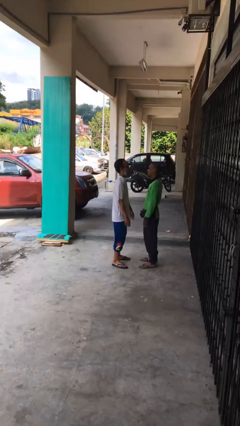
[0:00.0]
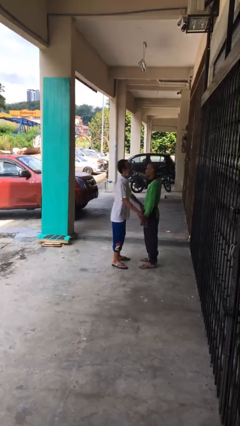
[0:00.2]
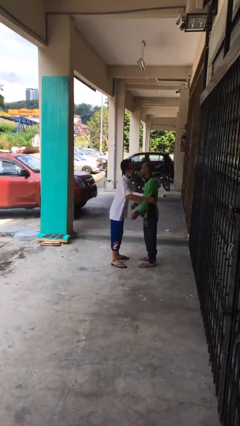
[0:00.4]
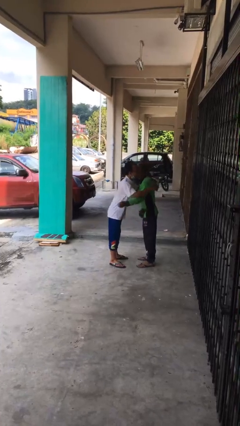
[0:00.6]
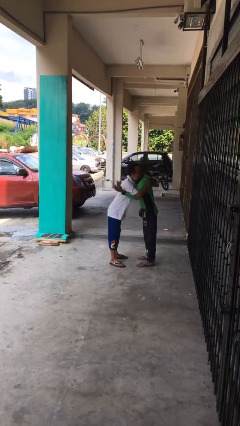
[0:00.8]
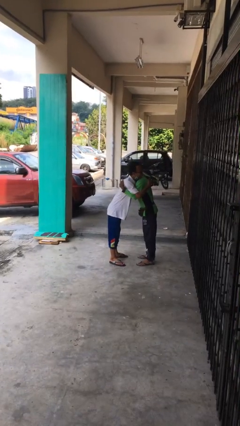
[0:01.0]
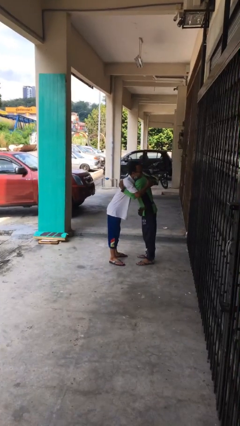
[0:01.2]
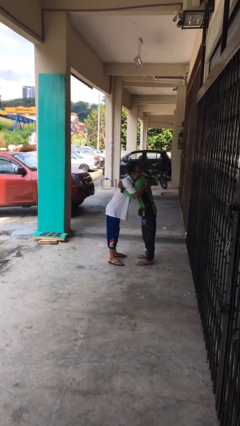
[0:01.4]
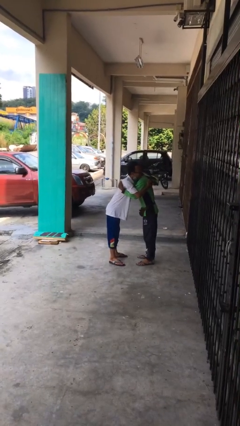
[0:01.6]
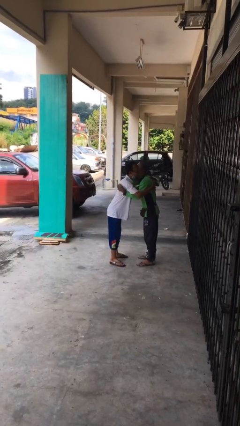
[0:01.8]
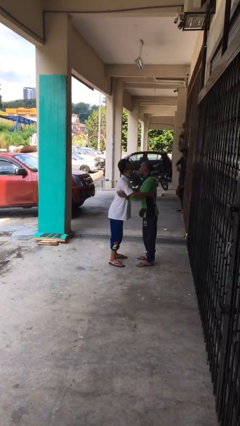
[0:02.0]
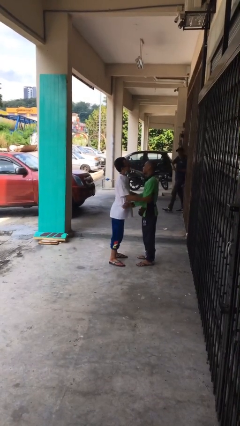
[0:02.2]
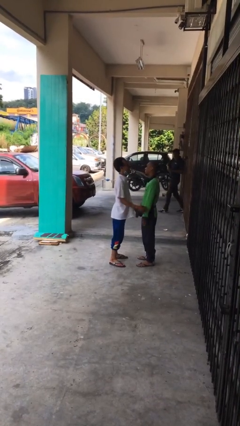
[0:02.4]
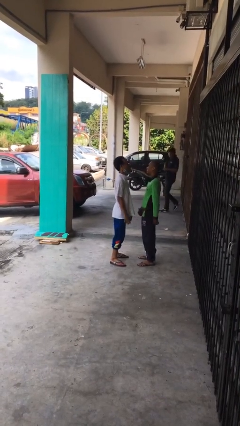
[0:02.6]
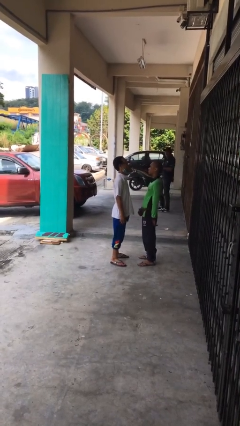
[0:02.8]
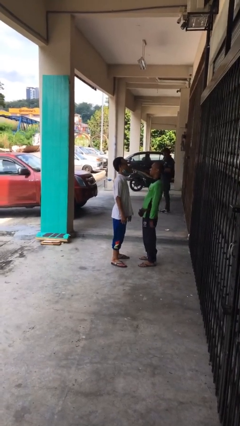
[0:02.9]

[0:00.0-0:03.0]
person embraces person

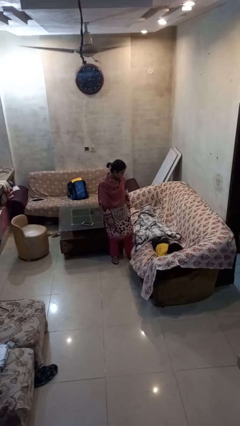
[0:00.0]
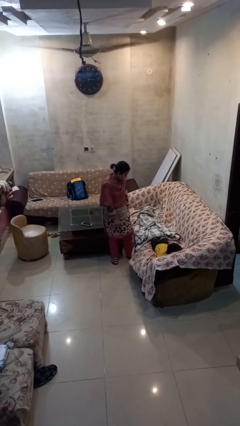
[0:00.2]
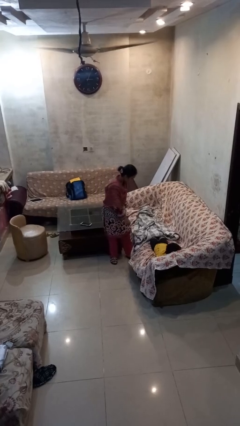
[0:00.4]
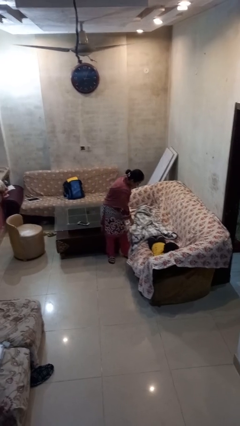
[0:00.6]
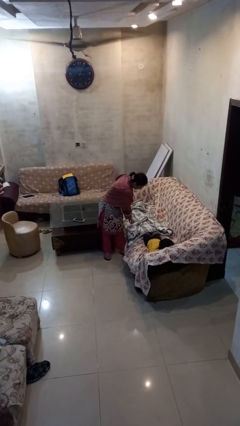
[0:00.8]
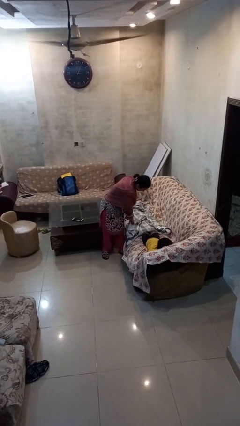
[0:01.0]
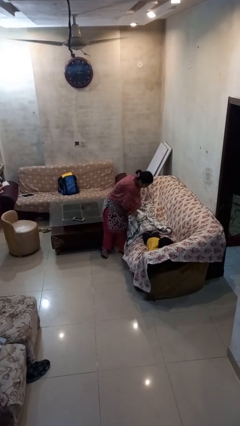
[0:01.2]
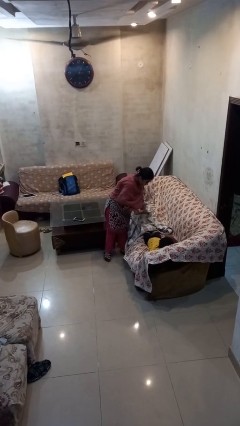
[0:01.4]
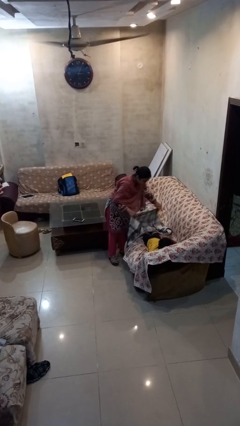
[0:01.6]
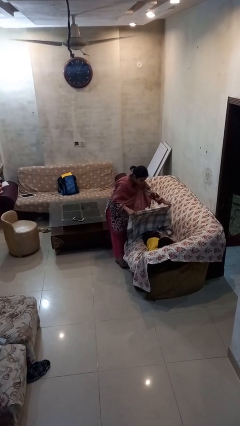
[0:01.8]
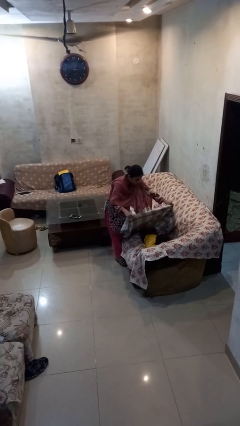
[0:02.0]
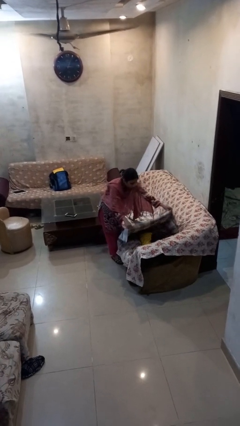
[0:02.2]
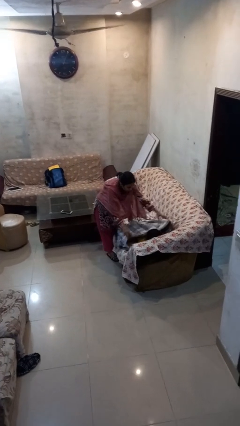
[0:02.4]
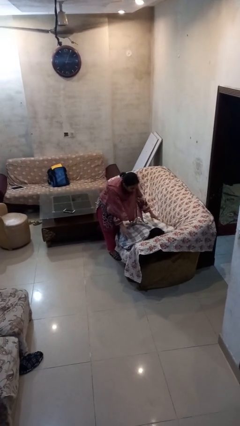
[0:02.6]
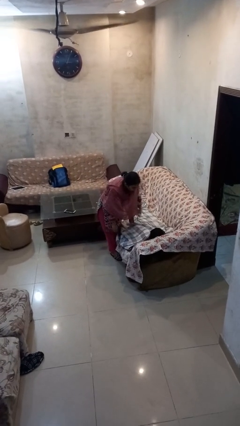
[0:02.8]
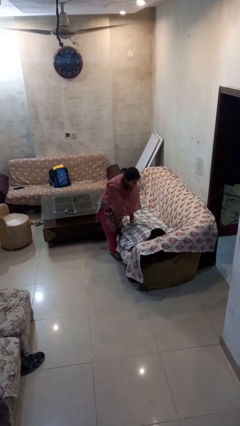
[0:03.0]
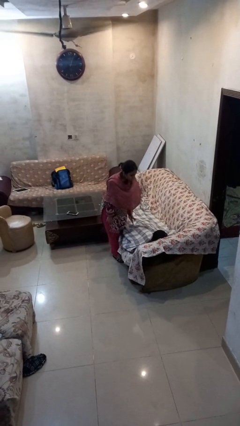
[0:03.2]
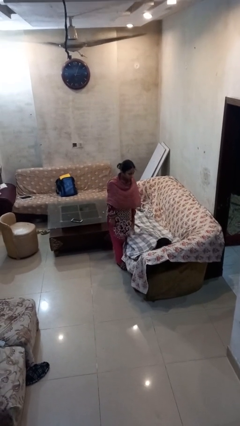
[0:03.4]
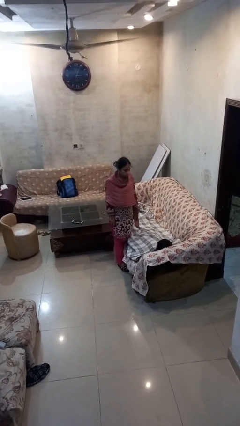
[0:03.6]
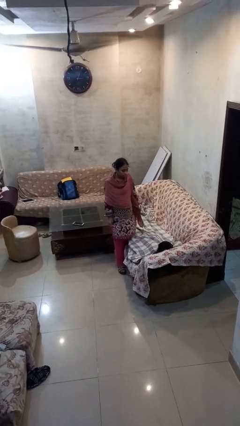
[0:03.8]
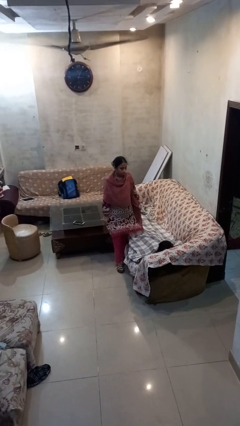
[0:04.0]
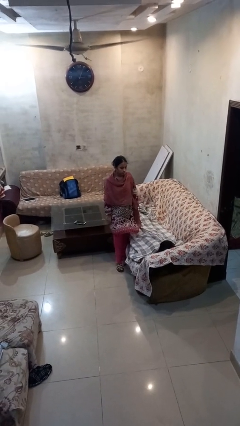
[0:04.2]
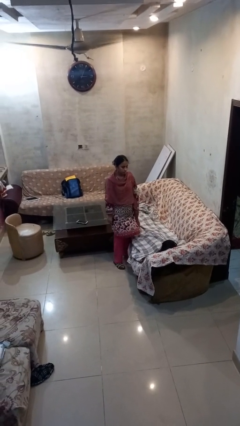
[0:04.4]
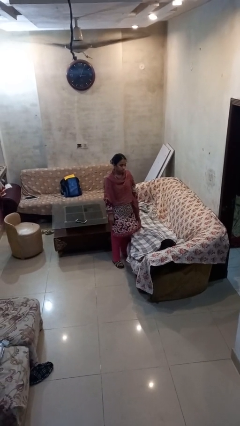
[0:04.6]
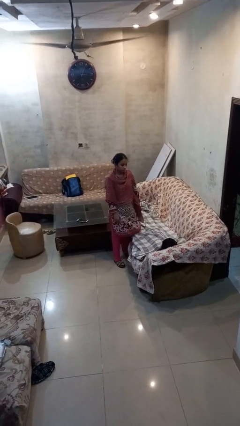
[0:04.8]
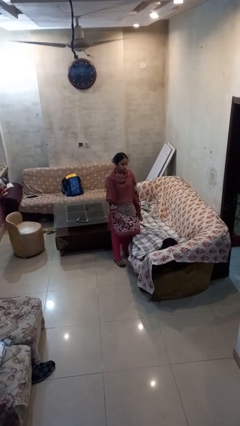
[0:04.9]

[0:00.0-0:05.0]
person covers friend with blanket

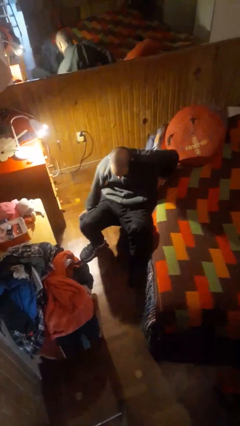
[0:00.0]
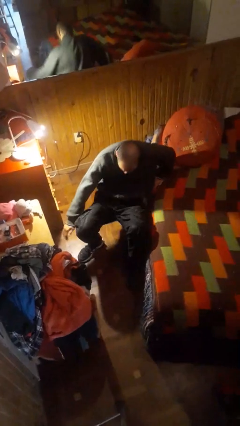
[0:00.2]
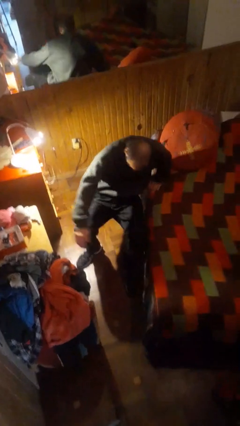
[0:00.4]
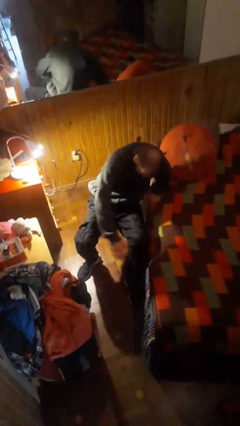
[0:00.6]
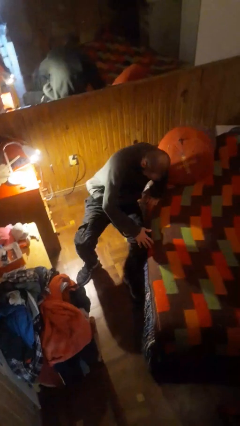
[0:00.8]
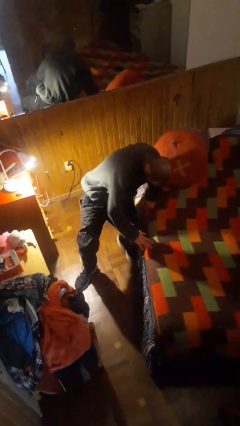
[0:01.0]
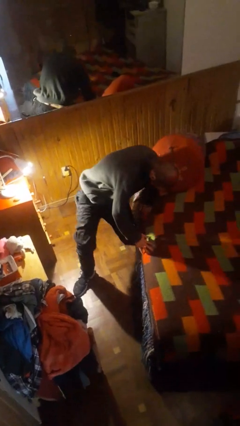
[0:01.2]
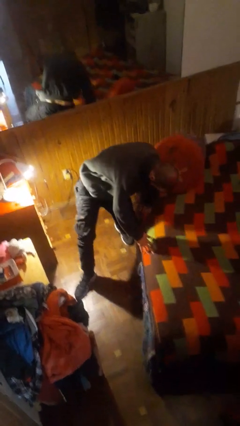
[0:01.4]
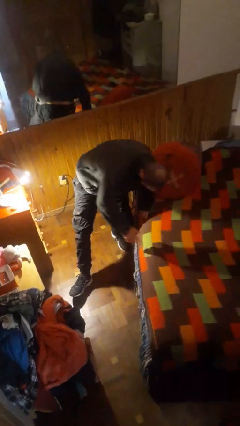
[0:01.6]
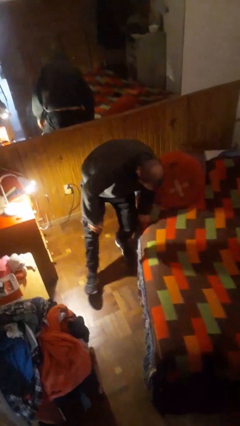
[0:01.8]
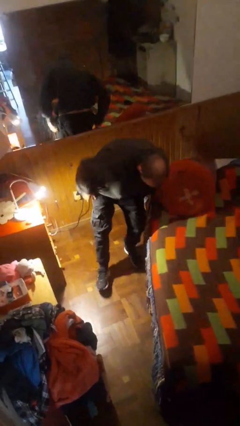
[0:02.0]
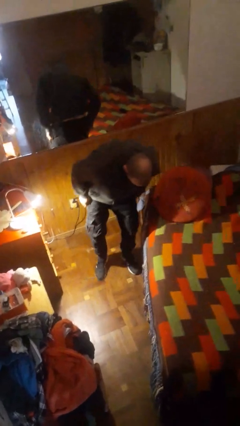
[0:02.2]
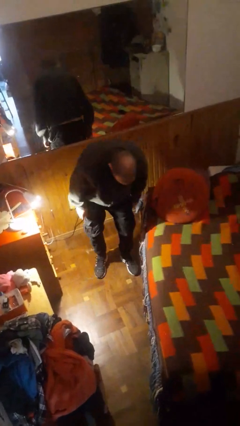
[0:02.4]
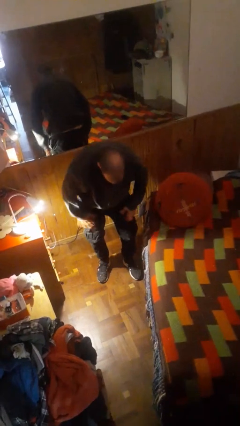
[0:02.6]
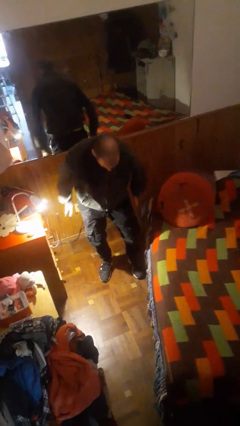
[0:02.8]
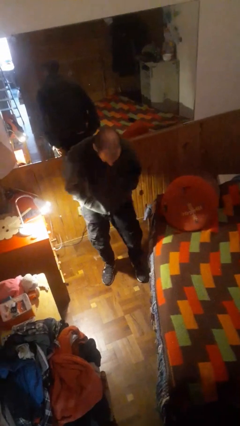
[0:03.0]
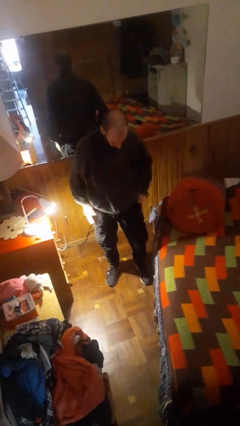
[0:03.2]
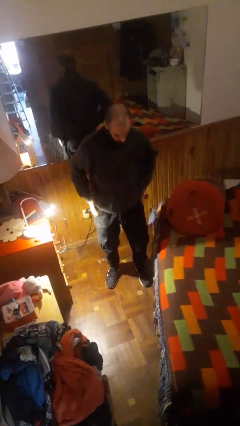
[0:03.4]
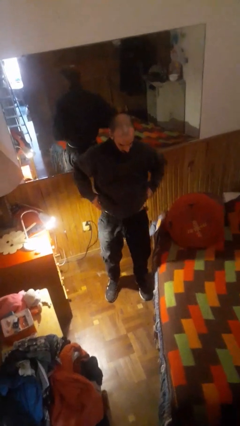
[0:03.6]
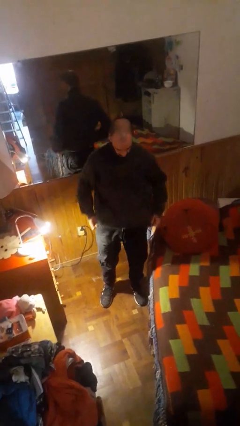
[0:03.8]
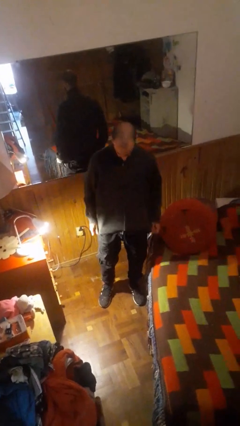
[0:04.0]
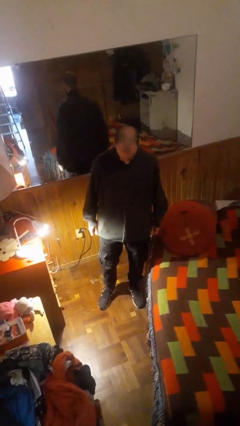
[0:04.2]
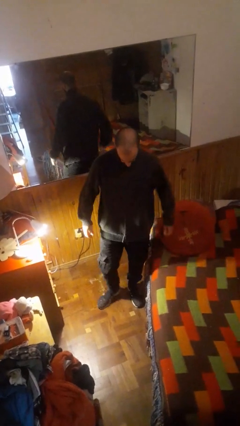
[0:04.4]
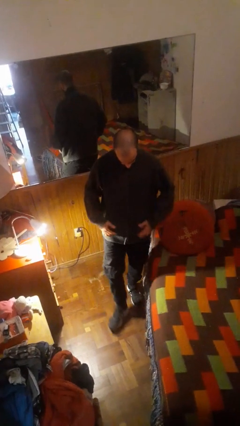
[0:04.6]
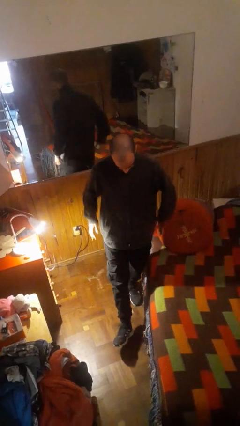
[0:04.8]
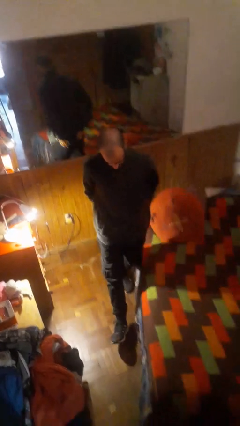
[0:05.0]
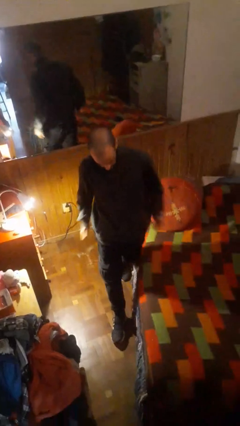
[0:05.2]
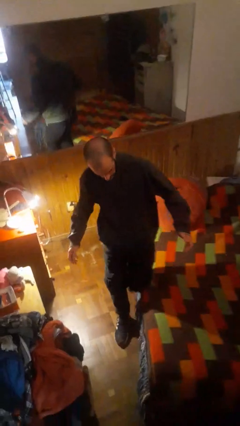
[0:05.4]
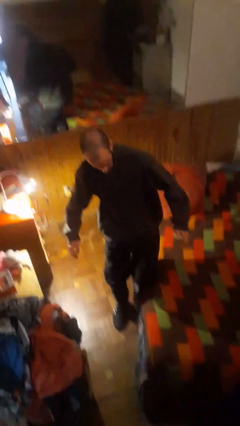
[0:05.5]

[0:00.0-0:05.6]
person stands up from floor

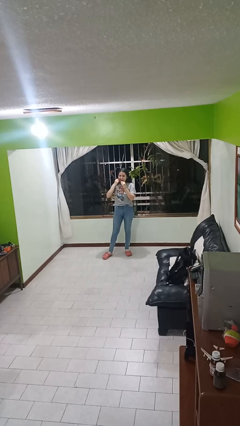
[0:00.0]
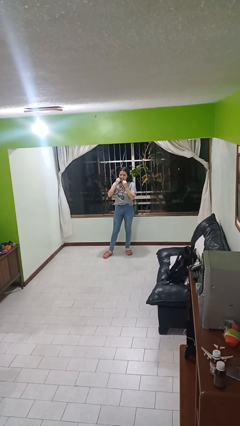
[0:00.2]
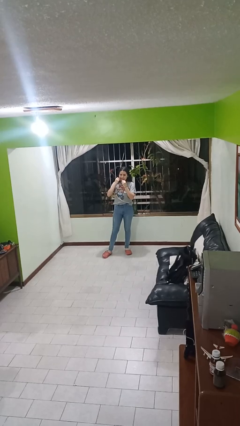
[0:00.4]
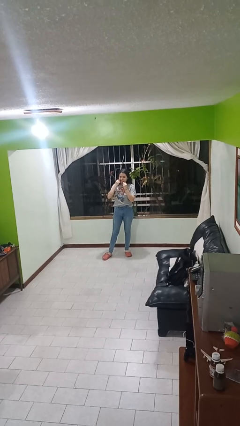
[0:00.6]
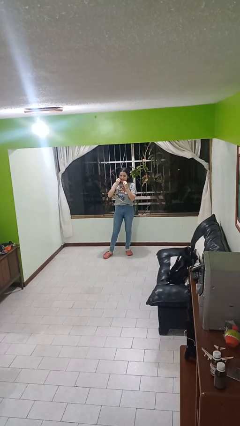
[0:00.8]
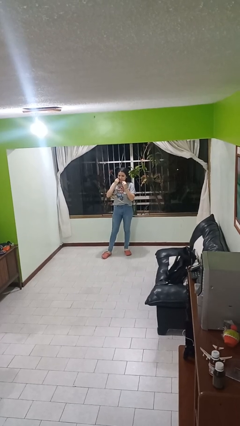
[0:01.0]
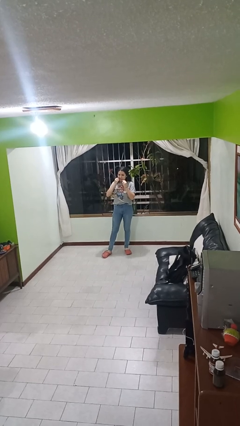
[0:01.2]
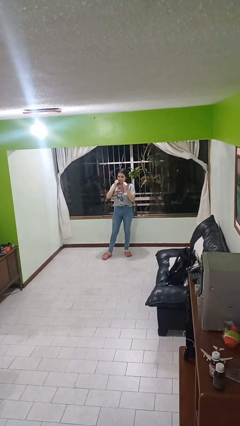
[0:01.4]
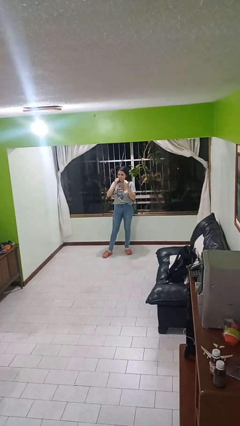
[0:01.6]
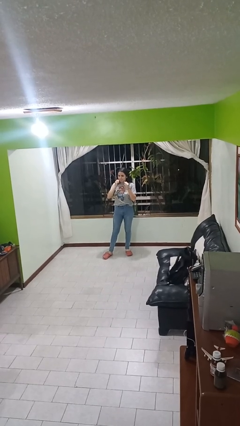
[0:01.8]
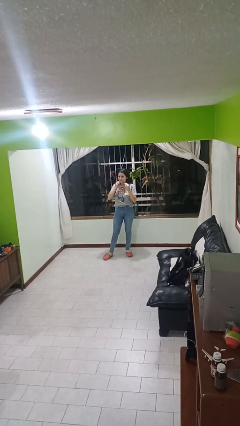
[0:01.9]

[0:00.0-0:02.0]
person flosses

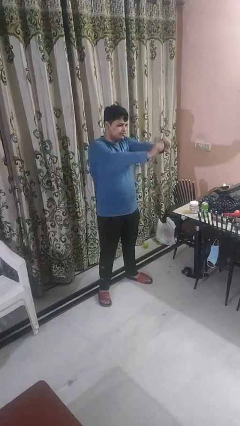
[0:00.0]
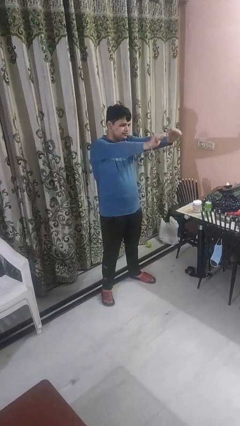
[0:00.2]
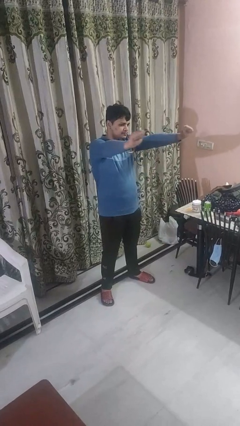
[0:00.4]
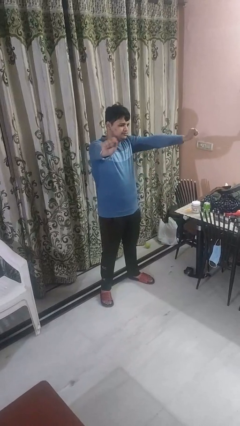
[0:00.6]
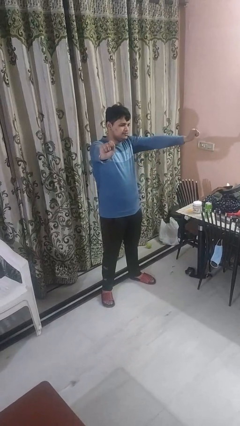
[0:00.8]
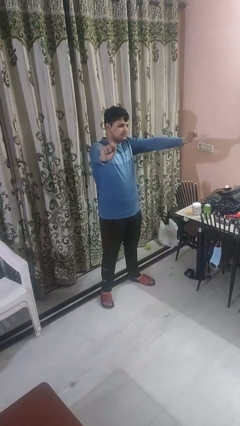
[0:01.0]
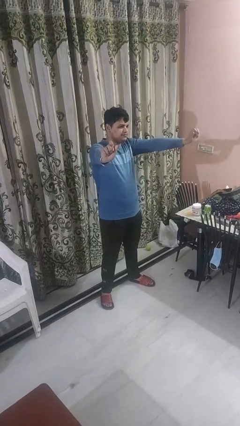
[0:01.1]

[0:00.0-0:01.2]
person gestures zoom in

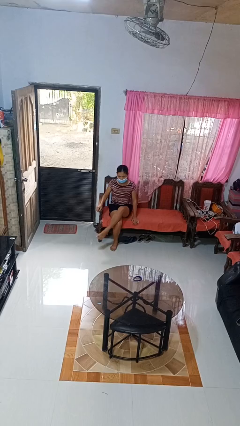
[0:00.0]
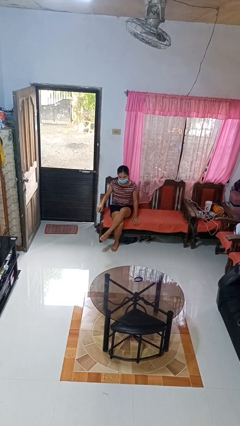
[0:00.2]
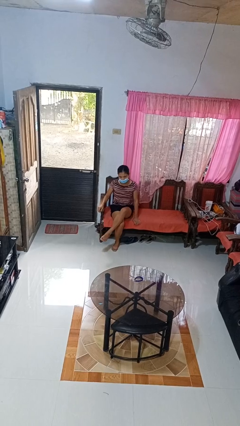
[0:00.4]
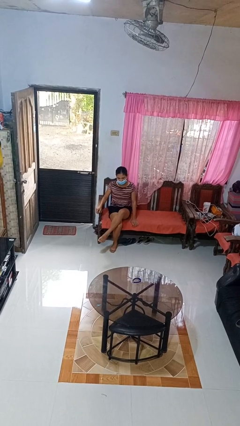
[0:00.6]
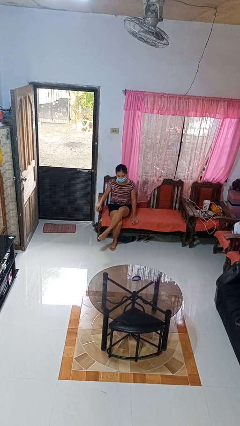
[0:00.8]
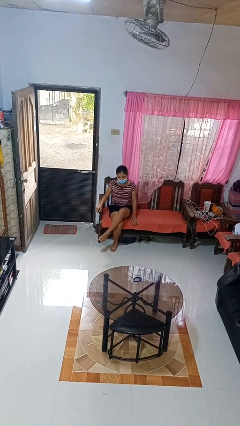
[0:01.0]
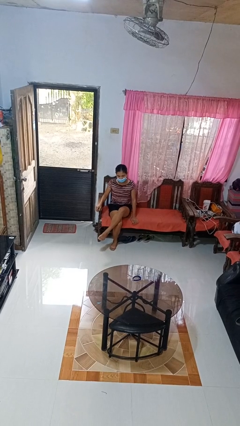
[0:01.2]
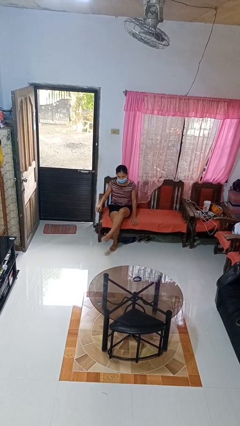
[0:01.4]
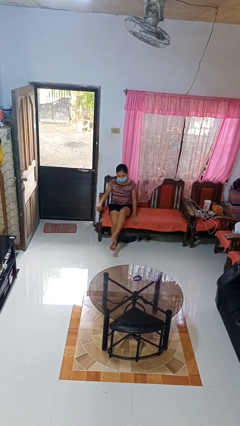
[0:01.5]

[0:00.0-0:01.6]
person crosses legs
